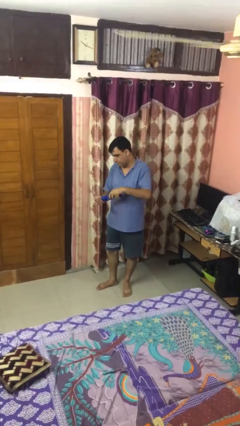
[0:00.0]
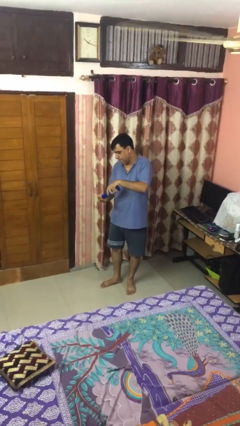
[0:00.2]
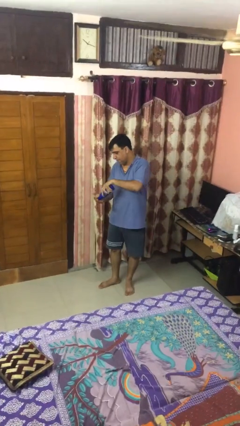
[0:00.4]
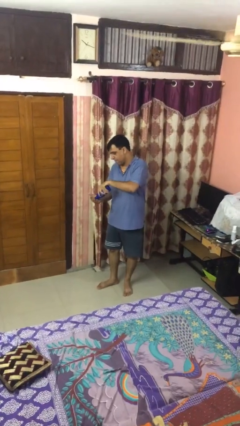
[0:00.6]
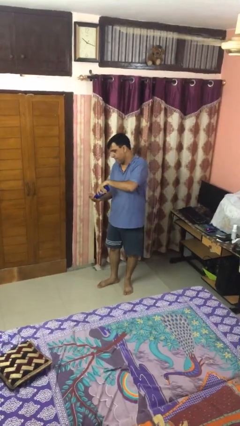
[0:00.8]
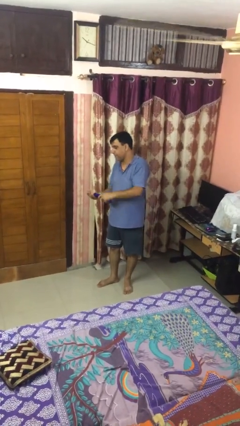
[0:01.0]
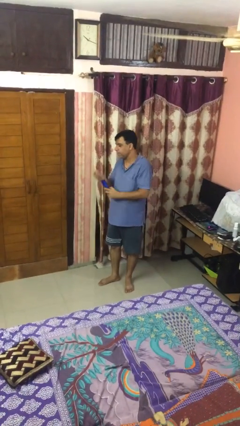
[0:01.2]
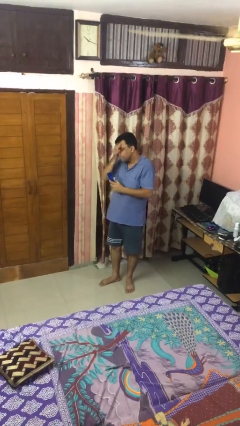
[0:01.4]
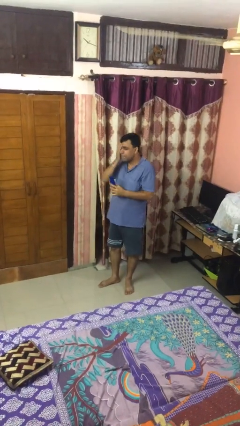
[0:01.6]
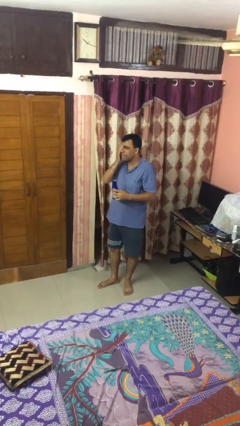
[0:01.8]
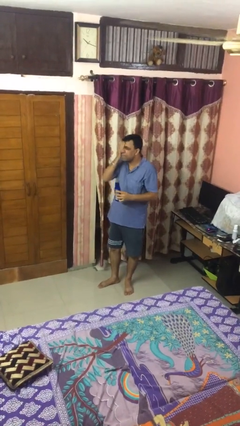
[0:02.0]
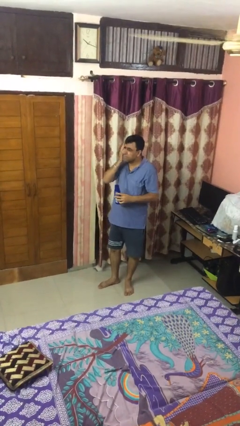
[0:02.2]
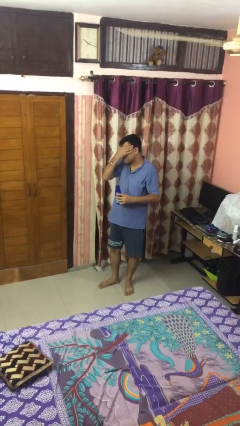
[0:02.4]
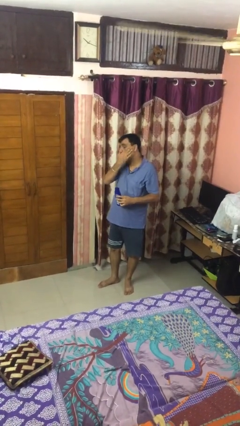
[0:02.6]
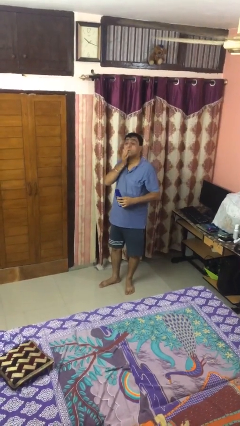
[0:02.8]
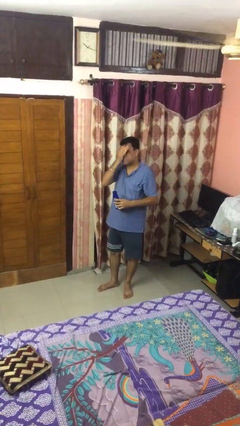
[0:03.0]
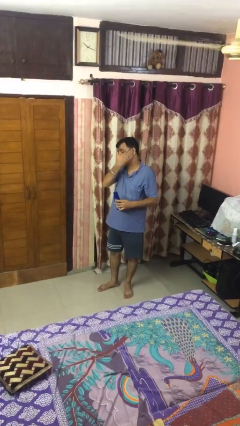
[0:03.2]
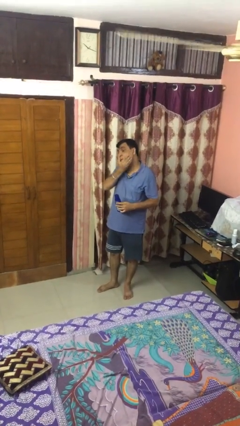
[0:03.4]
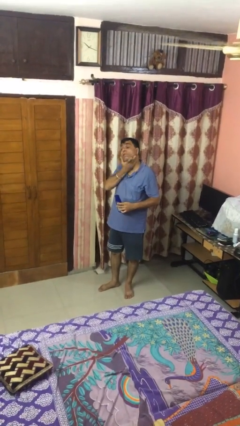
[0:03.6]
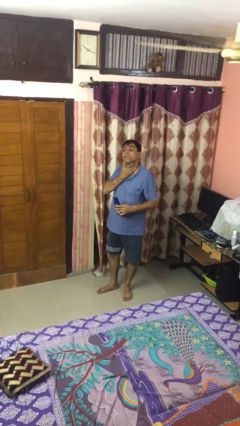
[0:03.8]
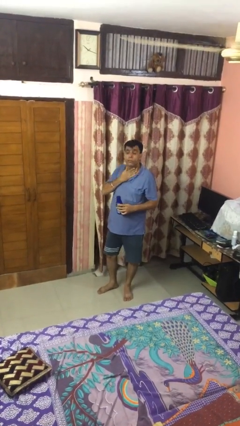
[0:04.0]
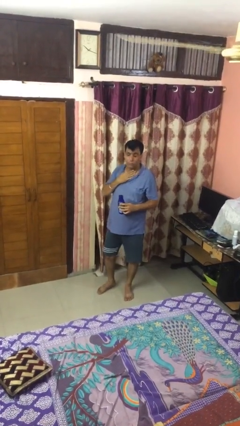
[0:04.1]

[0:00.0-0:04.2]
person applies facial moisturizer

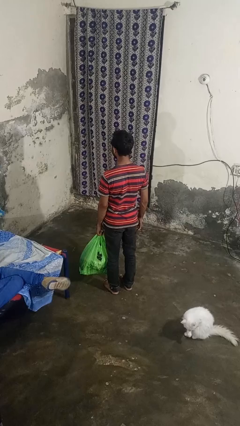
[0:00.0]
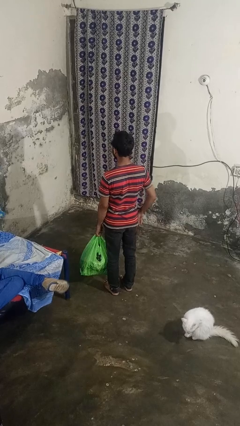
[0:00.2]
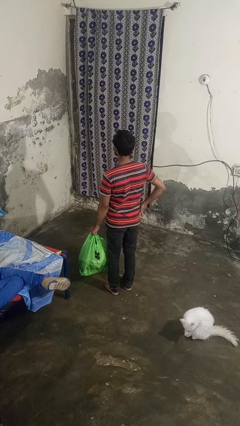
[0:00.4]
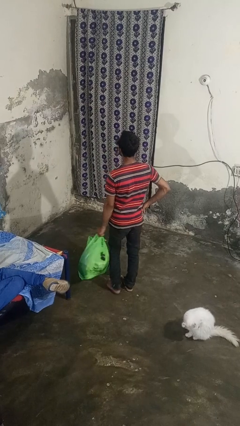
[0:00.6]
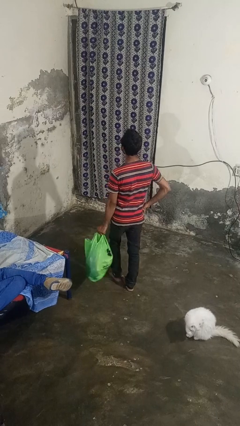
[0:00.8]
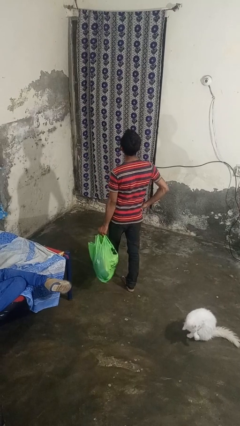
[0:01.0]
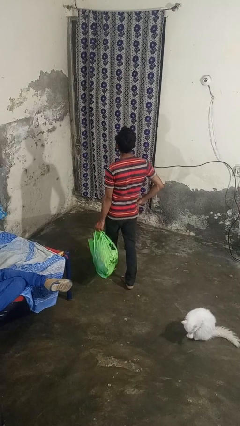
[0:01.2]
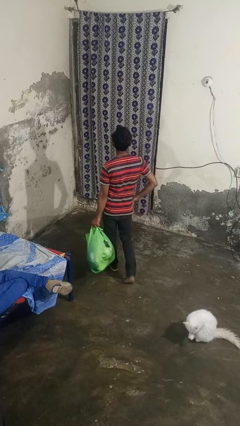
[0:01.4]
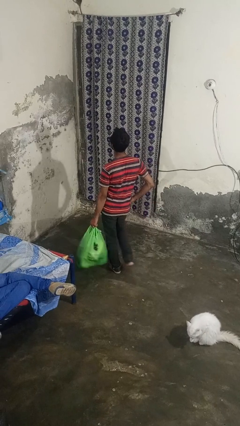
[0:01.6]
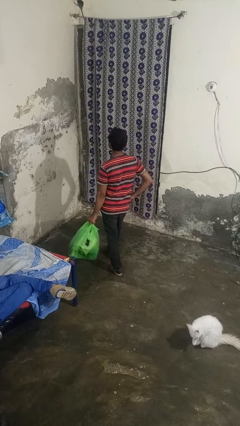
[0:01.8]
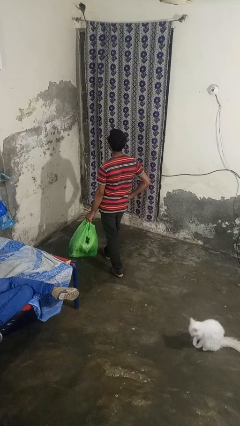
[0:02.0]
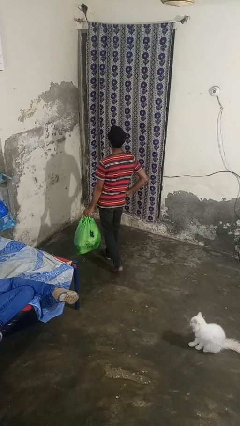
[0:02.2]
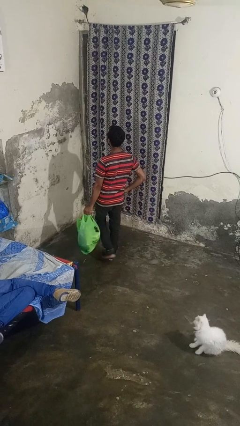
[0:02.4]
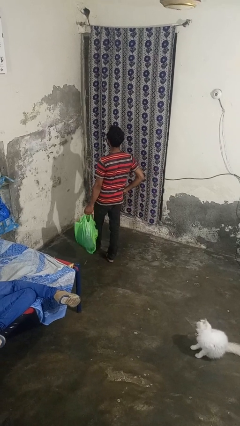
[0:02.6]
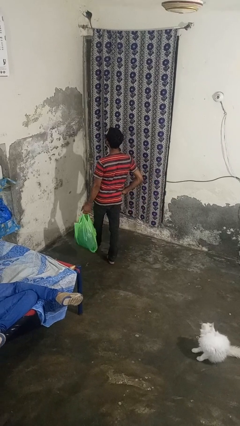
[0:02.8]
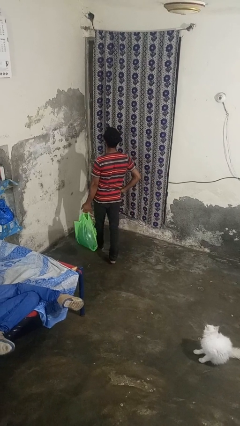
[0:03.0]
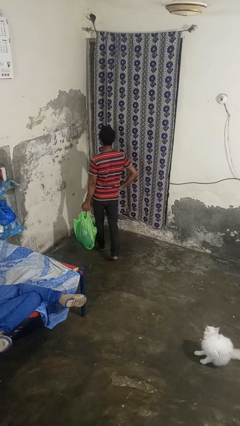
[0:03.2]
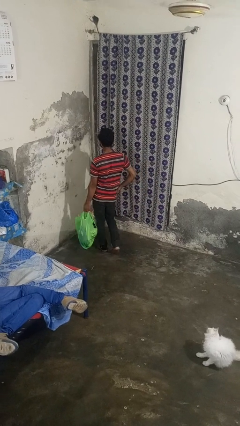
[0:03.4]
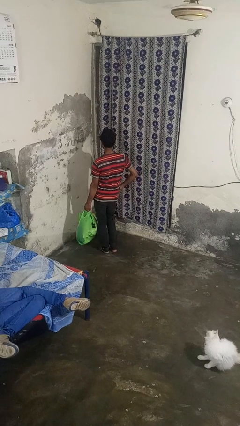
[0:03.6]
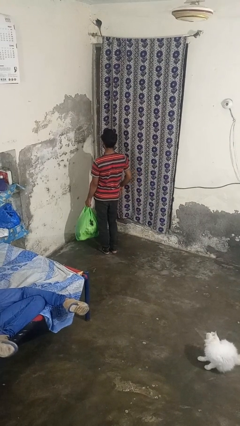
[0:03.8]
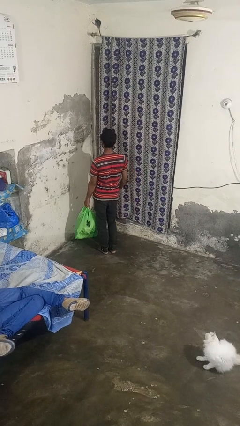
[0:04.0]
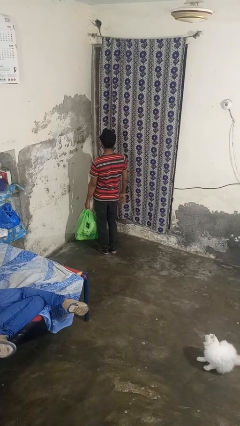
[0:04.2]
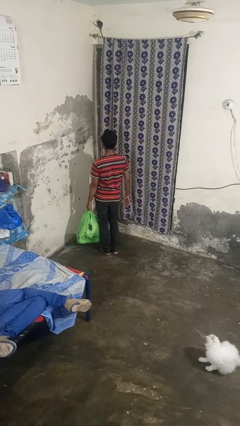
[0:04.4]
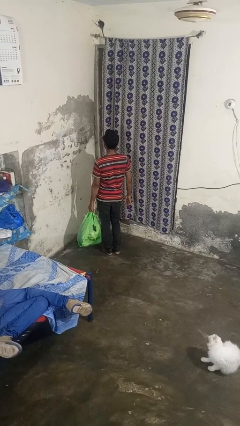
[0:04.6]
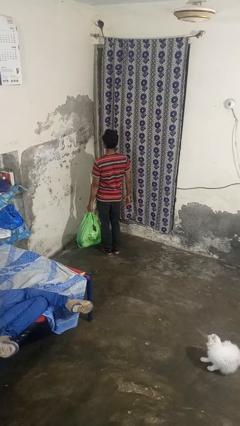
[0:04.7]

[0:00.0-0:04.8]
person carries groceries

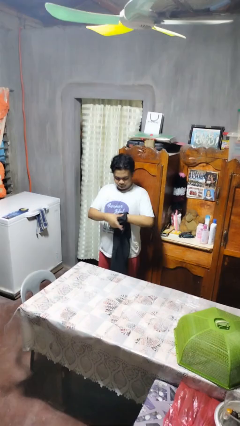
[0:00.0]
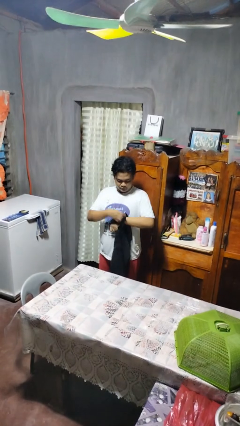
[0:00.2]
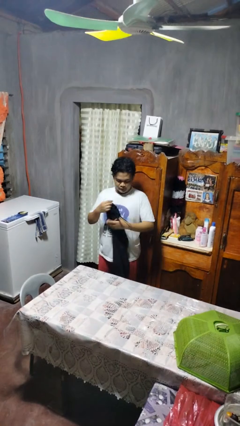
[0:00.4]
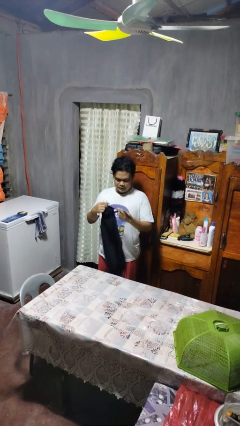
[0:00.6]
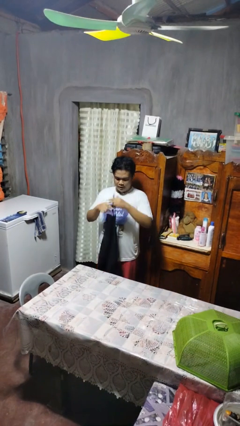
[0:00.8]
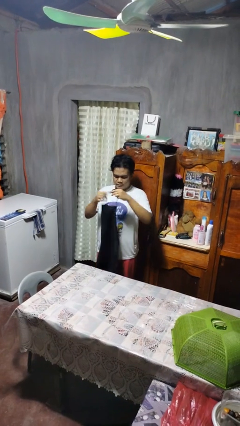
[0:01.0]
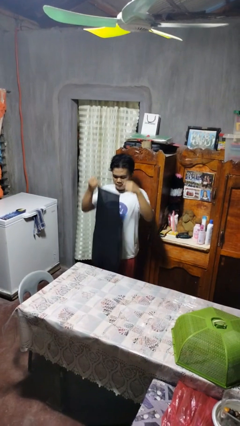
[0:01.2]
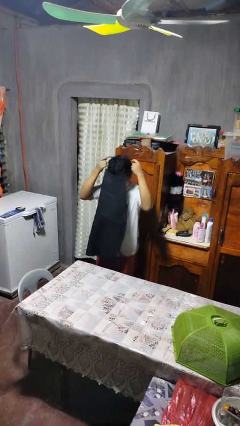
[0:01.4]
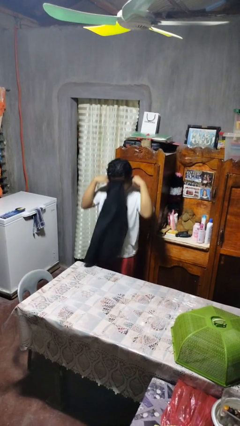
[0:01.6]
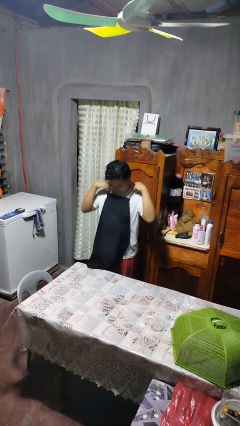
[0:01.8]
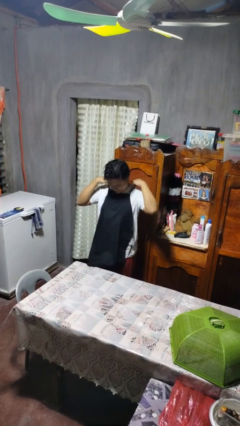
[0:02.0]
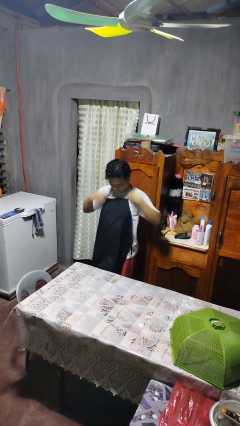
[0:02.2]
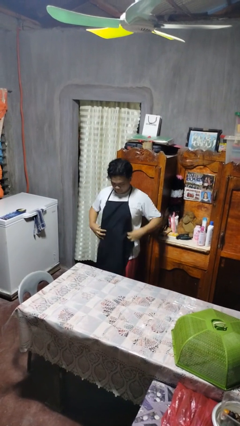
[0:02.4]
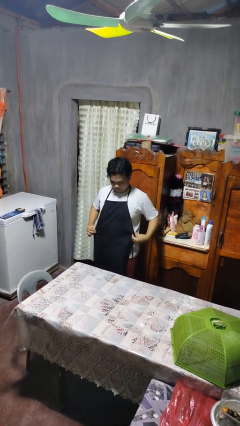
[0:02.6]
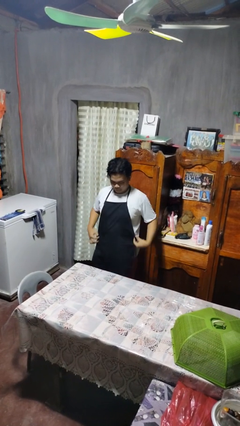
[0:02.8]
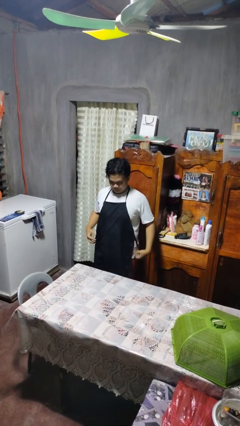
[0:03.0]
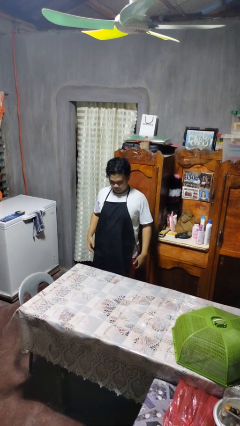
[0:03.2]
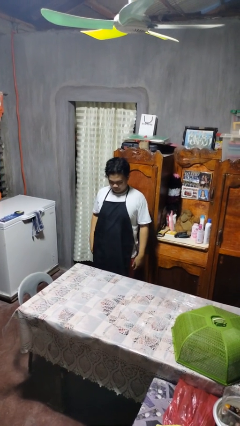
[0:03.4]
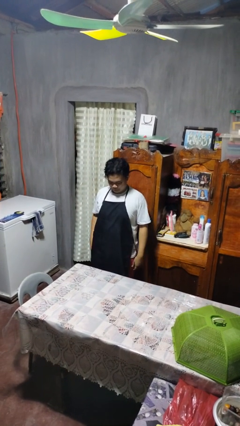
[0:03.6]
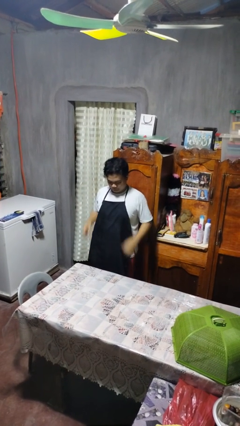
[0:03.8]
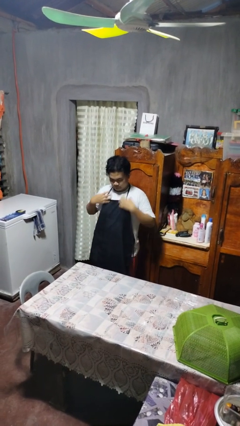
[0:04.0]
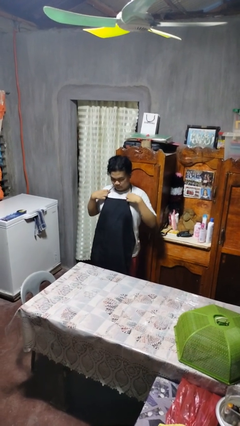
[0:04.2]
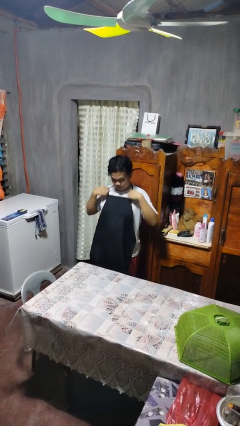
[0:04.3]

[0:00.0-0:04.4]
person puts on apron

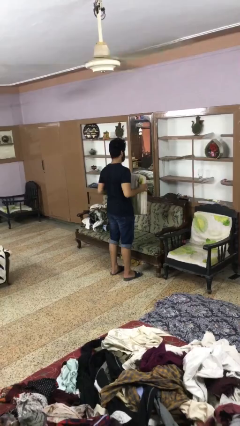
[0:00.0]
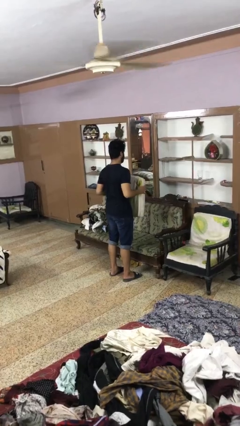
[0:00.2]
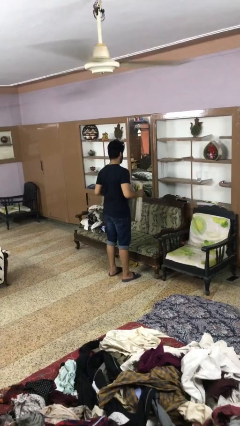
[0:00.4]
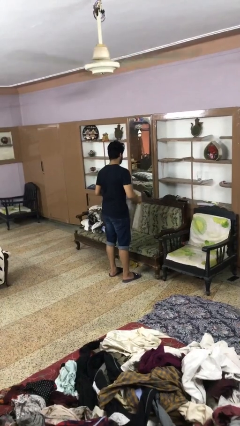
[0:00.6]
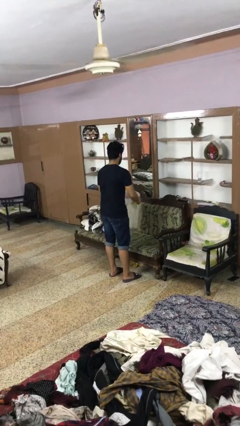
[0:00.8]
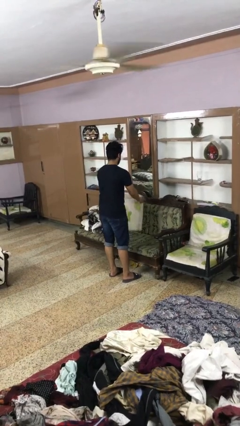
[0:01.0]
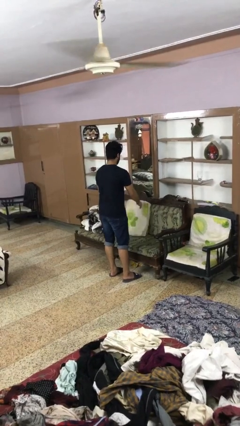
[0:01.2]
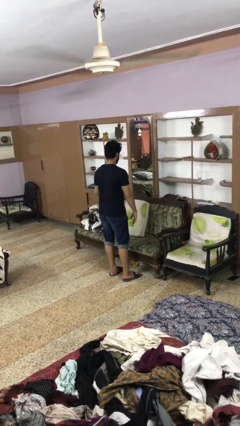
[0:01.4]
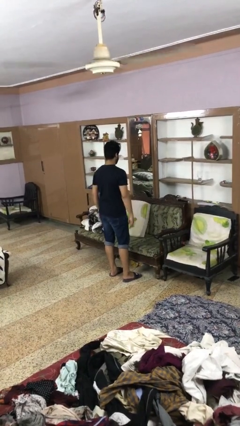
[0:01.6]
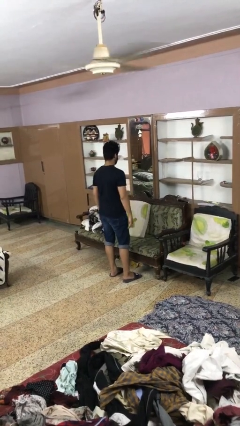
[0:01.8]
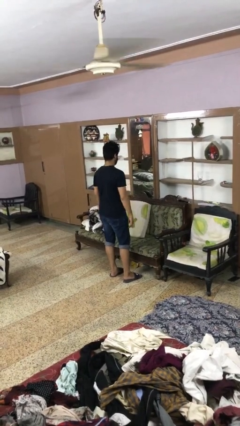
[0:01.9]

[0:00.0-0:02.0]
person puts down object on couch

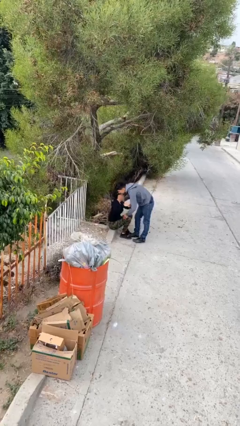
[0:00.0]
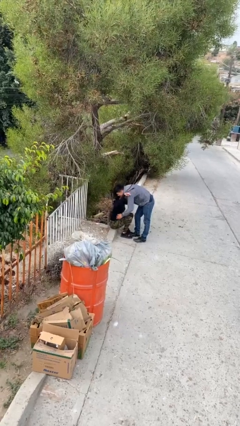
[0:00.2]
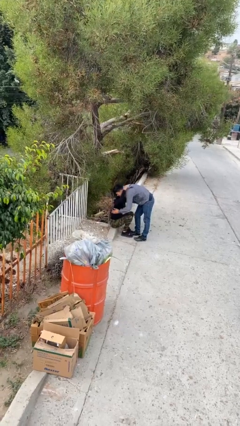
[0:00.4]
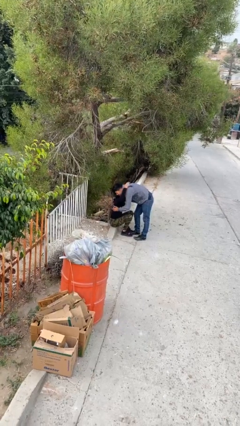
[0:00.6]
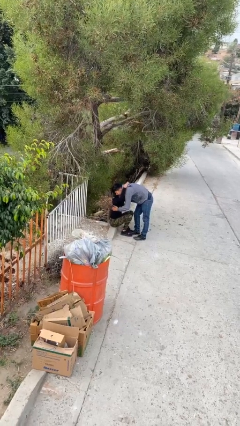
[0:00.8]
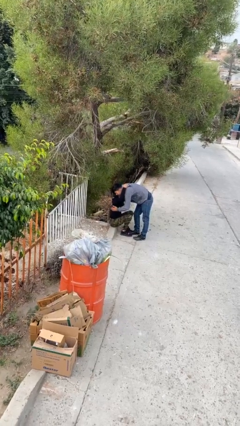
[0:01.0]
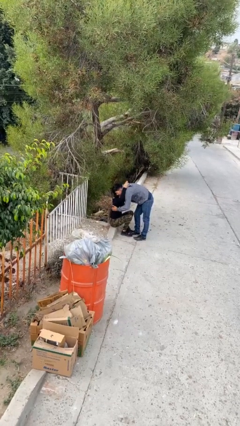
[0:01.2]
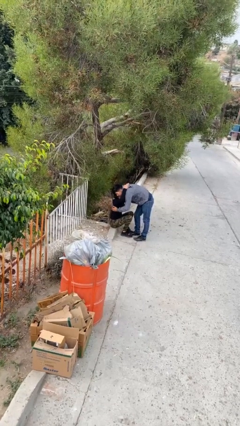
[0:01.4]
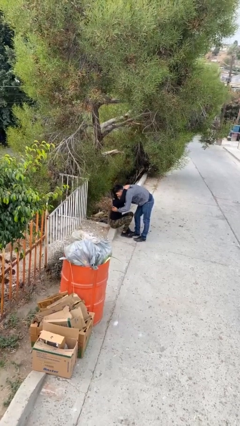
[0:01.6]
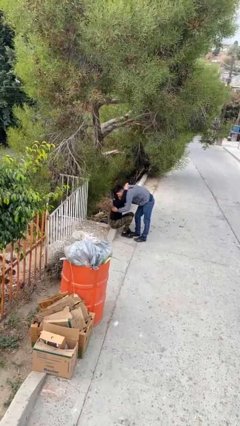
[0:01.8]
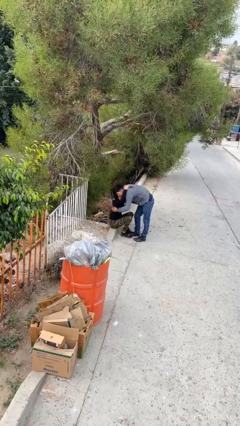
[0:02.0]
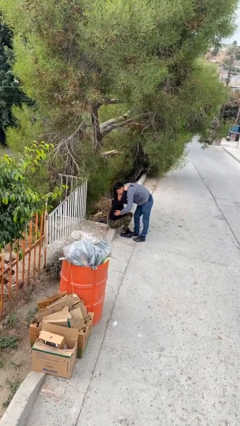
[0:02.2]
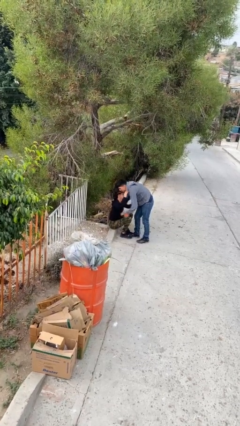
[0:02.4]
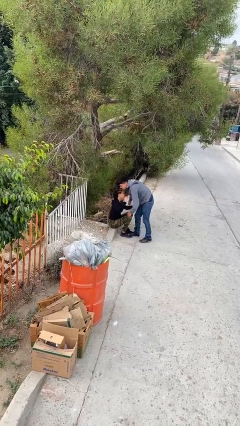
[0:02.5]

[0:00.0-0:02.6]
person embraces person
